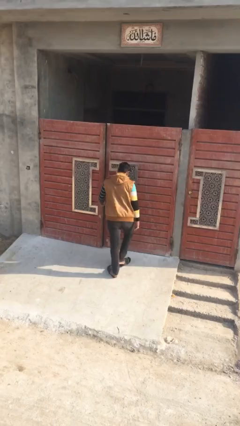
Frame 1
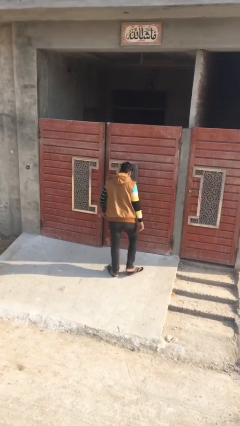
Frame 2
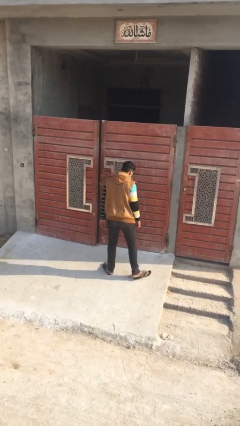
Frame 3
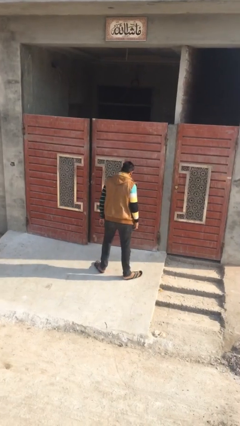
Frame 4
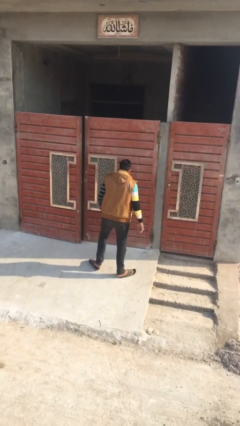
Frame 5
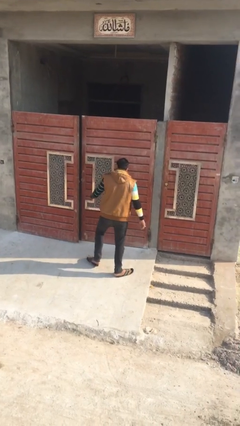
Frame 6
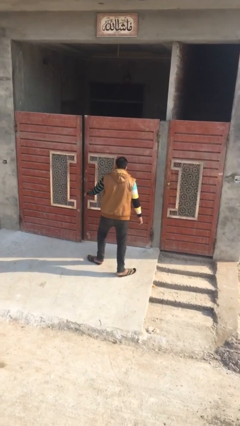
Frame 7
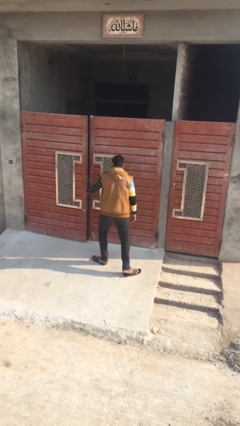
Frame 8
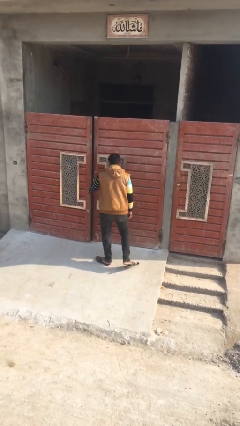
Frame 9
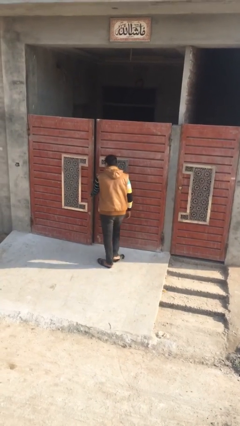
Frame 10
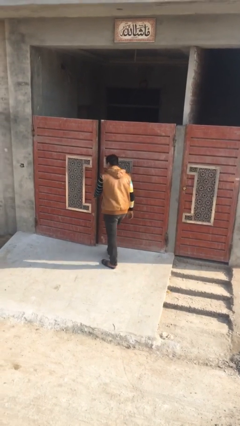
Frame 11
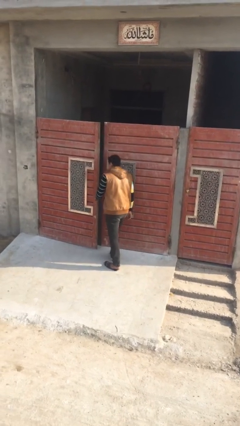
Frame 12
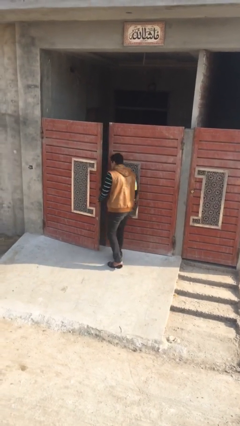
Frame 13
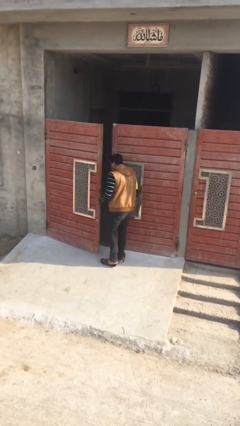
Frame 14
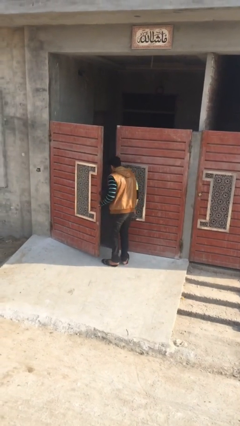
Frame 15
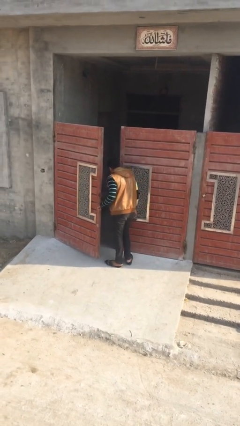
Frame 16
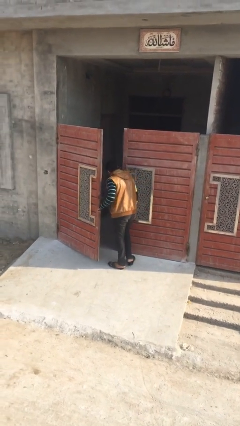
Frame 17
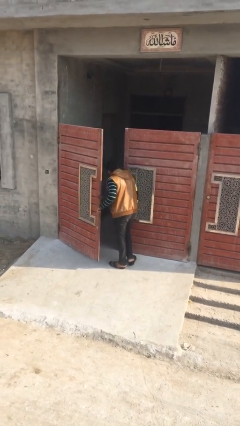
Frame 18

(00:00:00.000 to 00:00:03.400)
person opens facility door

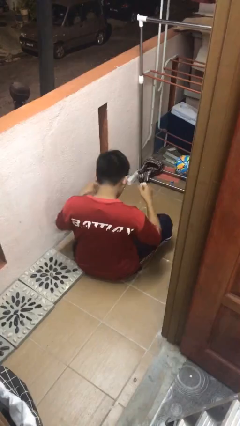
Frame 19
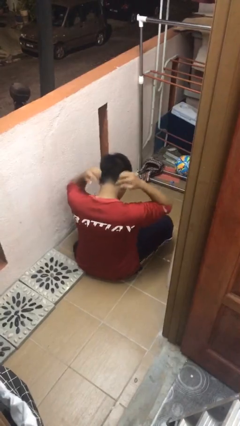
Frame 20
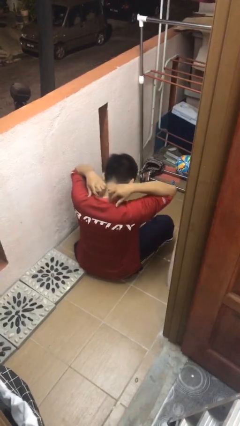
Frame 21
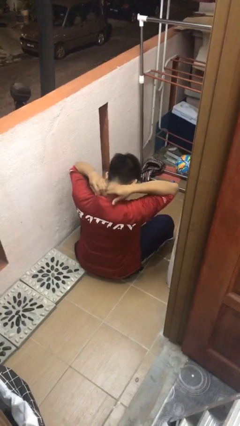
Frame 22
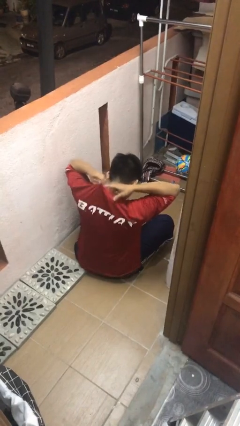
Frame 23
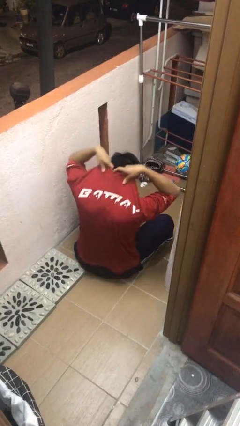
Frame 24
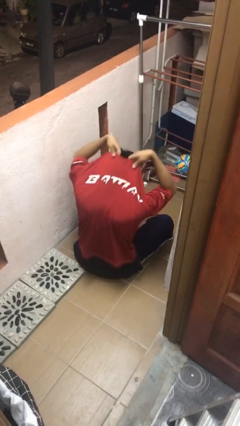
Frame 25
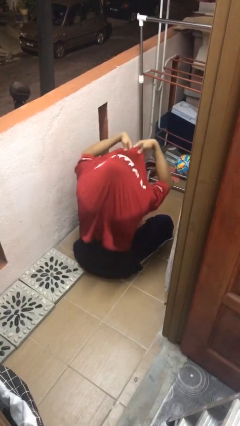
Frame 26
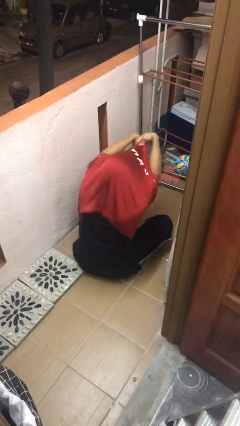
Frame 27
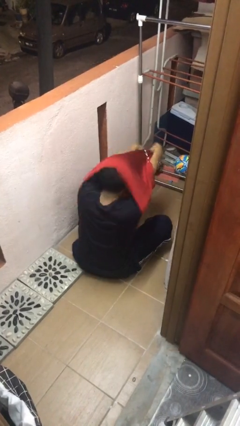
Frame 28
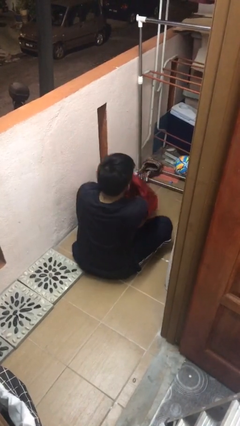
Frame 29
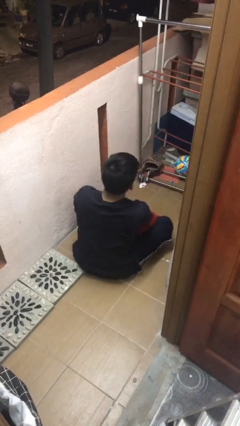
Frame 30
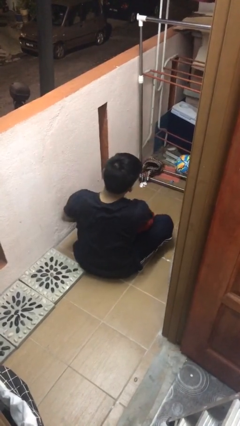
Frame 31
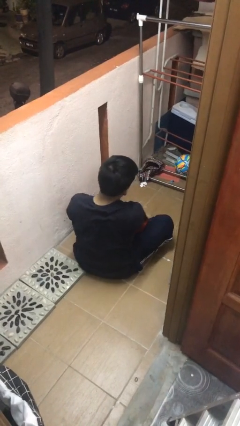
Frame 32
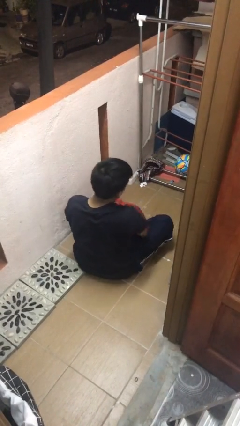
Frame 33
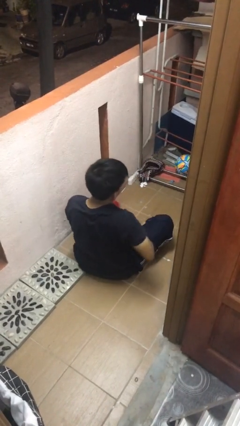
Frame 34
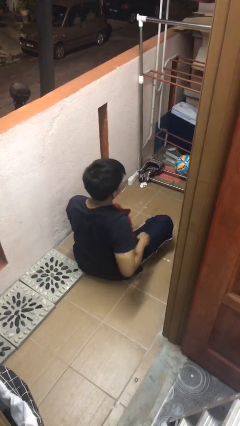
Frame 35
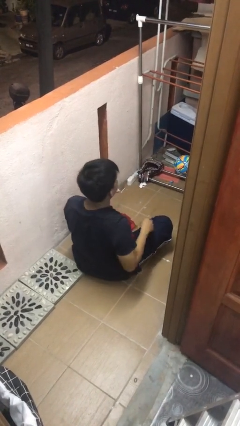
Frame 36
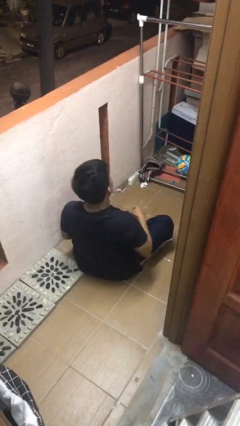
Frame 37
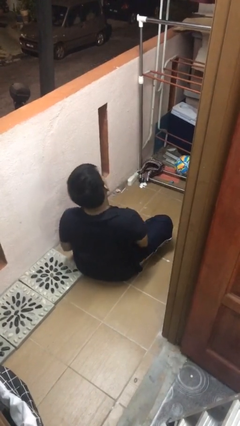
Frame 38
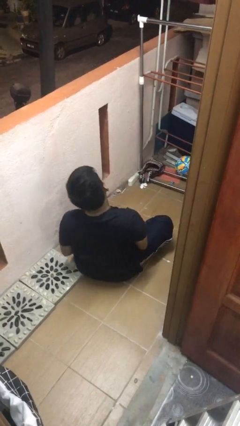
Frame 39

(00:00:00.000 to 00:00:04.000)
person takes off shirt

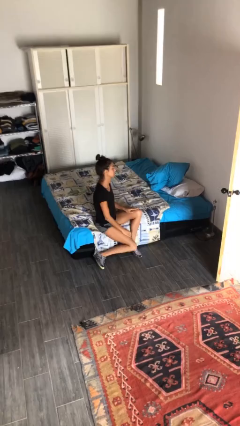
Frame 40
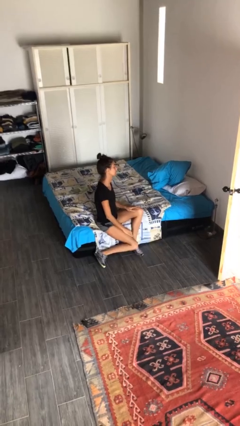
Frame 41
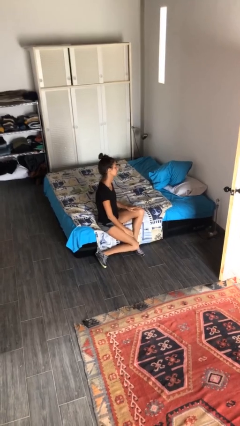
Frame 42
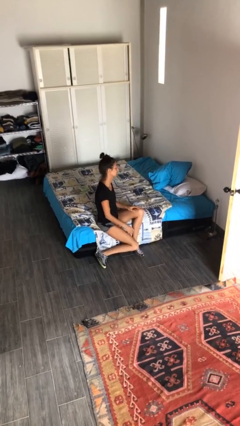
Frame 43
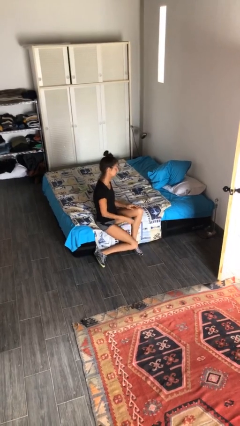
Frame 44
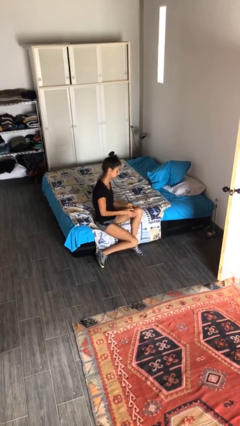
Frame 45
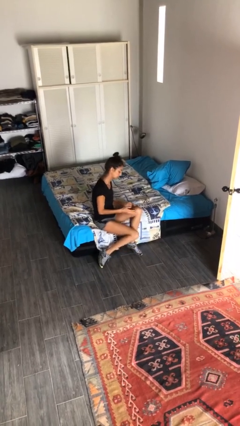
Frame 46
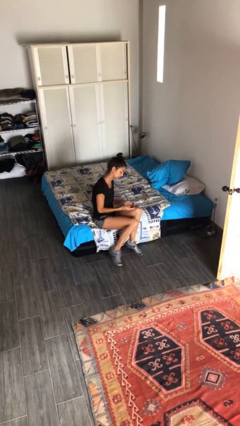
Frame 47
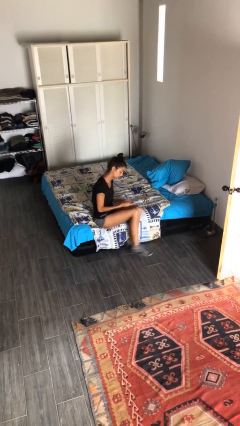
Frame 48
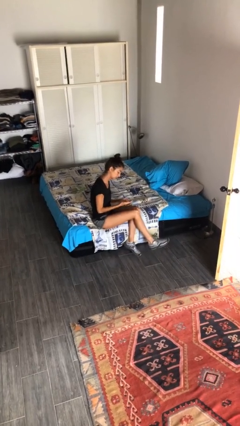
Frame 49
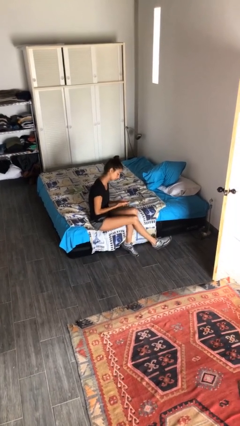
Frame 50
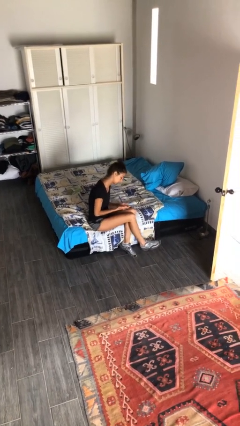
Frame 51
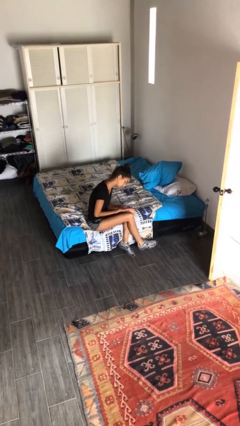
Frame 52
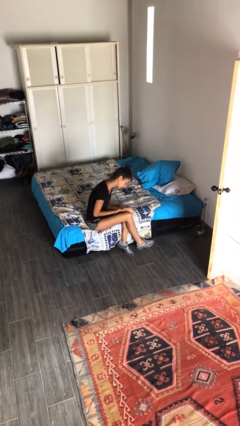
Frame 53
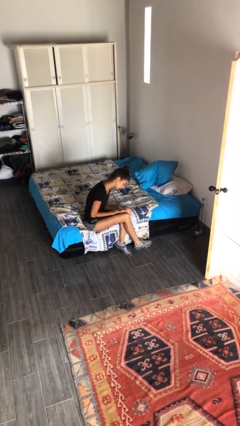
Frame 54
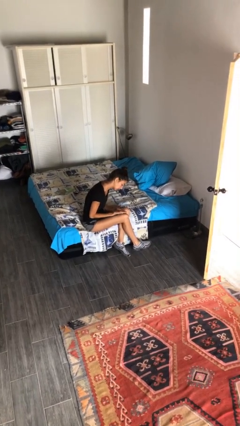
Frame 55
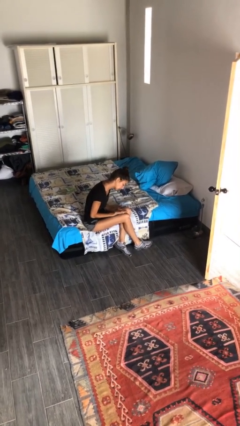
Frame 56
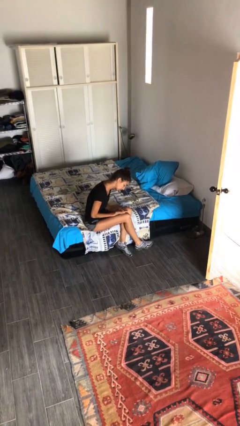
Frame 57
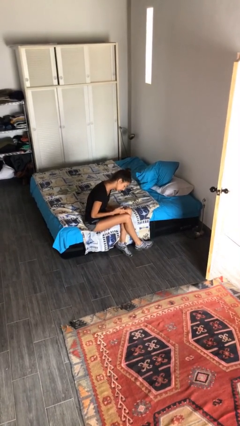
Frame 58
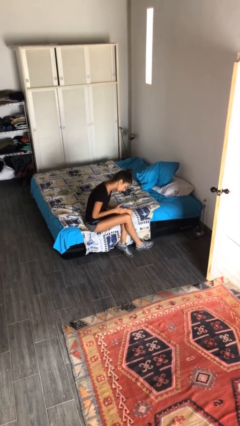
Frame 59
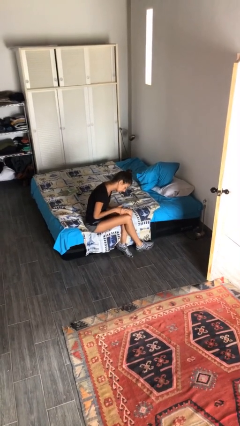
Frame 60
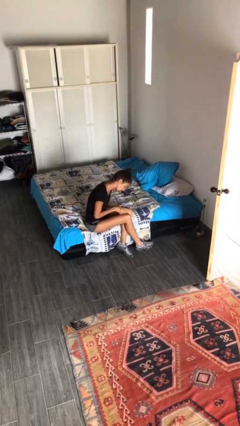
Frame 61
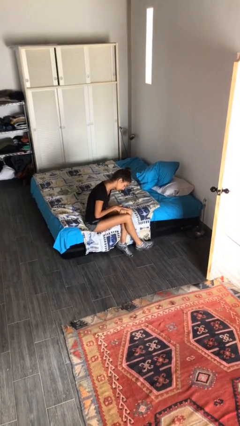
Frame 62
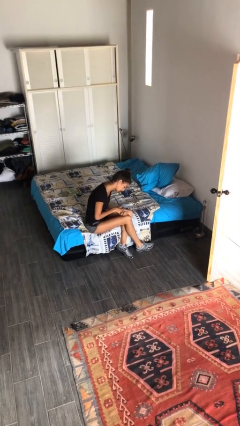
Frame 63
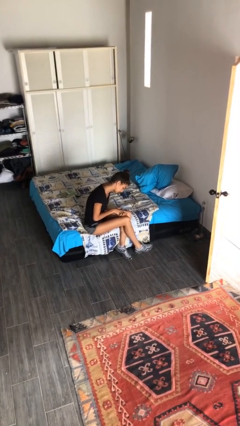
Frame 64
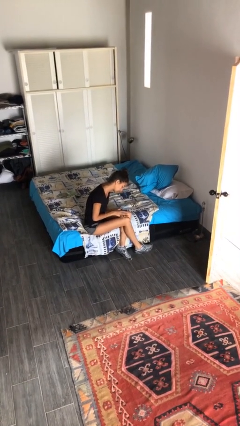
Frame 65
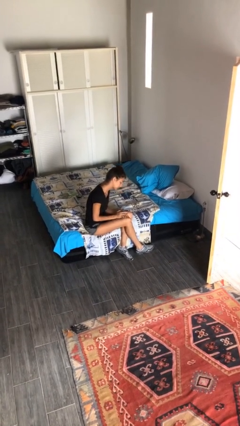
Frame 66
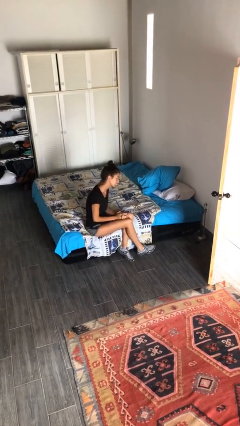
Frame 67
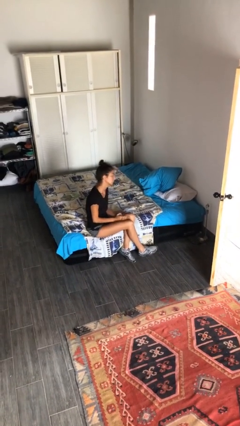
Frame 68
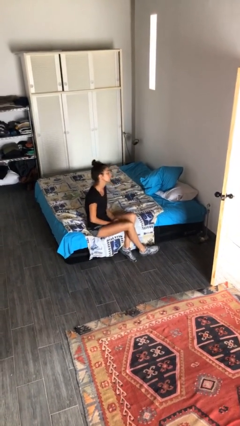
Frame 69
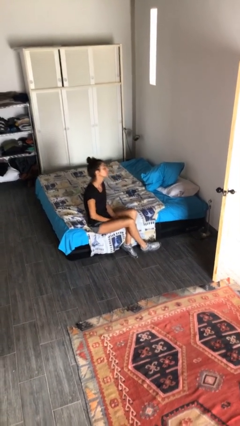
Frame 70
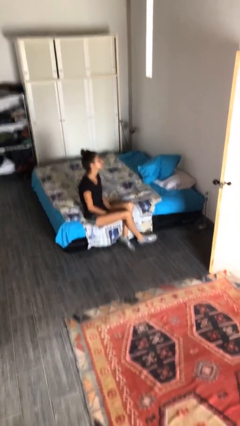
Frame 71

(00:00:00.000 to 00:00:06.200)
person looks at hands in lap

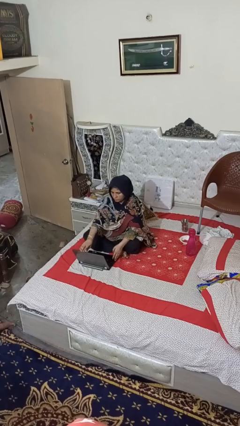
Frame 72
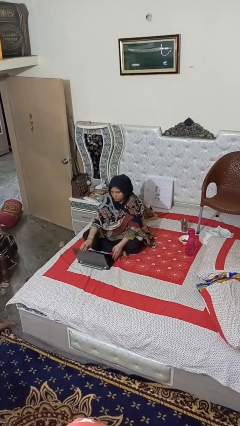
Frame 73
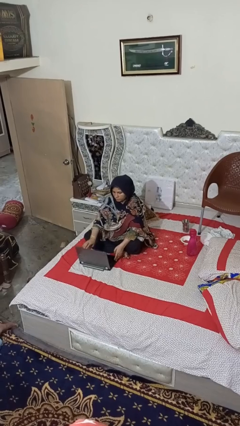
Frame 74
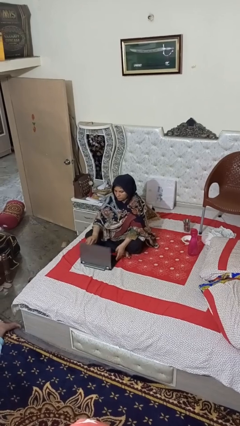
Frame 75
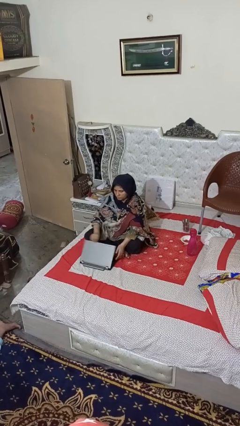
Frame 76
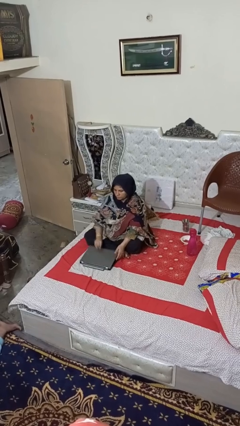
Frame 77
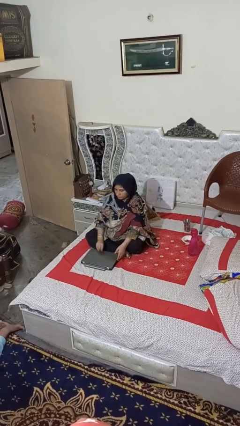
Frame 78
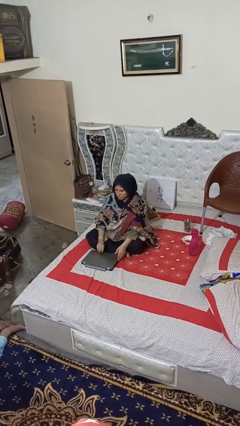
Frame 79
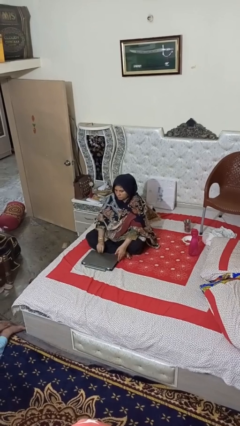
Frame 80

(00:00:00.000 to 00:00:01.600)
person closes laptop

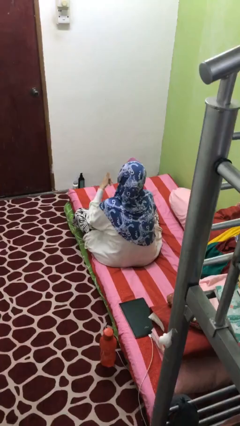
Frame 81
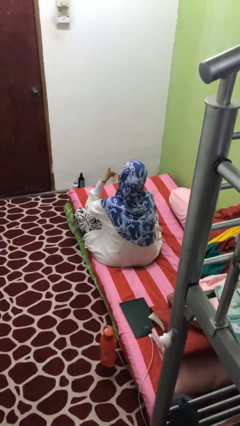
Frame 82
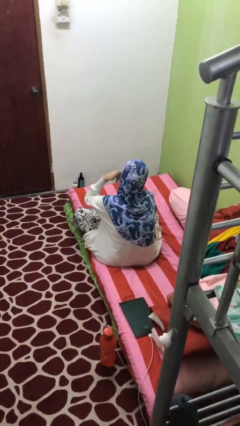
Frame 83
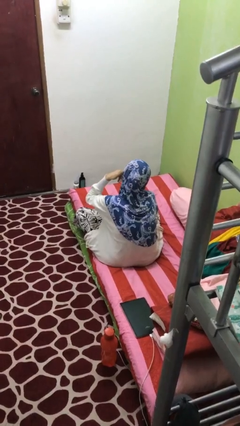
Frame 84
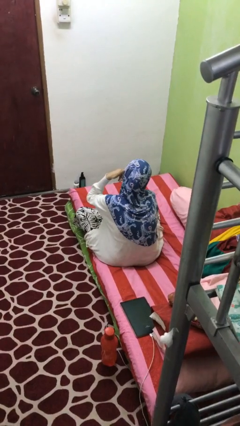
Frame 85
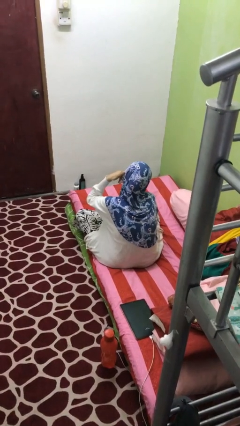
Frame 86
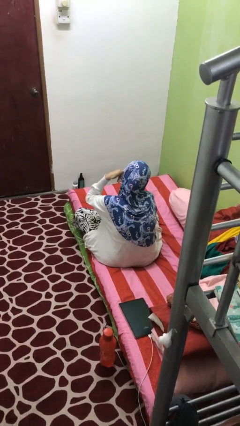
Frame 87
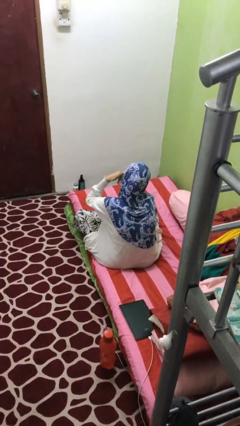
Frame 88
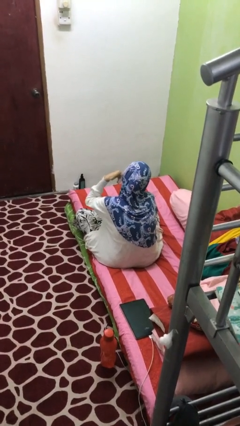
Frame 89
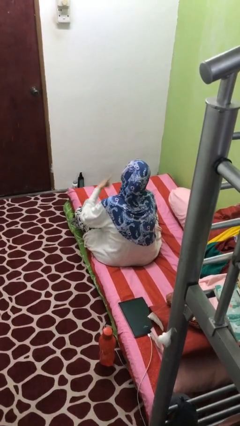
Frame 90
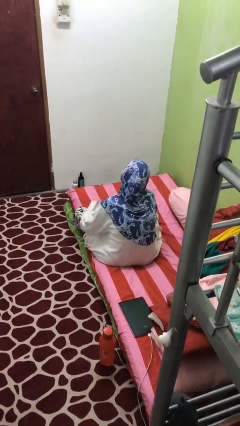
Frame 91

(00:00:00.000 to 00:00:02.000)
person gestures call me

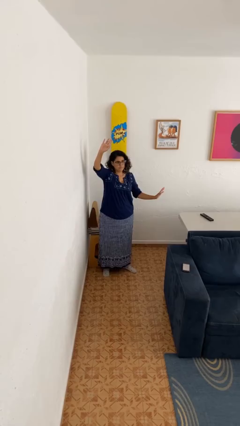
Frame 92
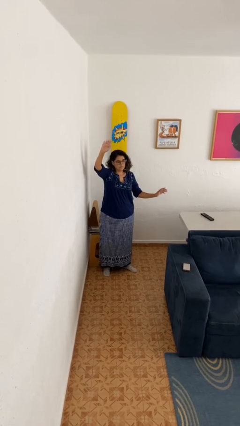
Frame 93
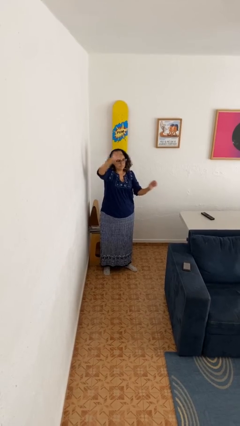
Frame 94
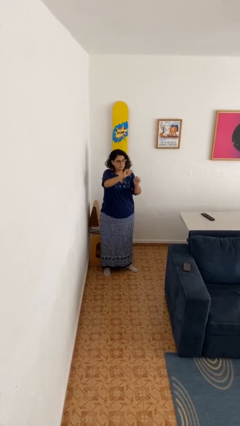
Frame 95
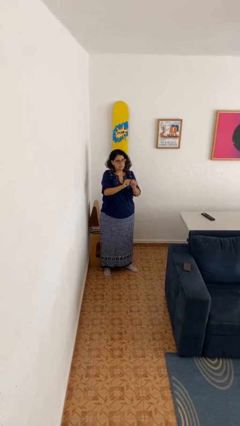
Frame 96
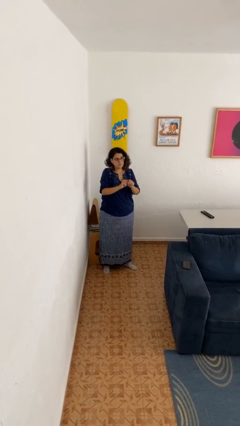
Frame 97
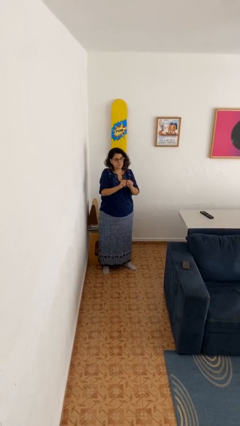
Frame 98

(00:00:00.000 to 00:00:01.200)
person gestures zoom out
